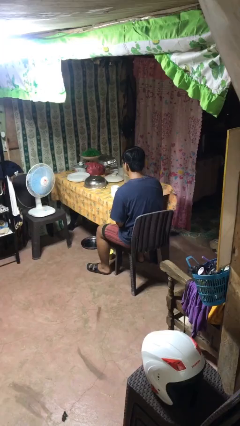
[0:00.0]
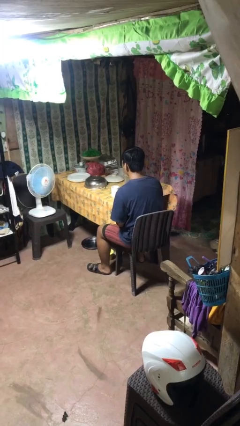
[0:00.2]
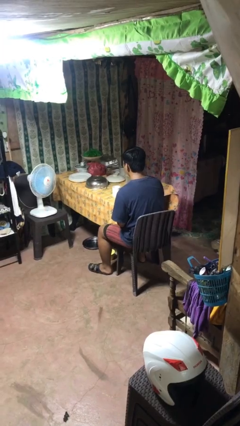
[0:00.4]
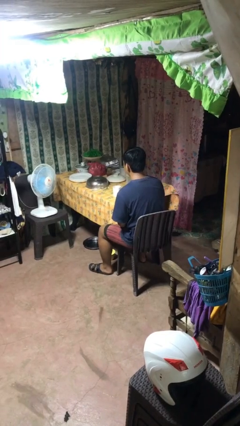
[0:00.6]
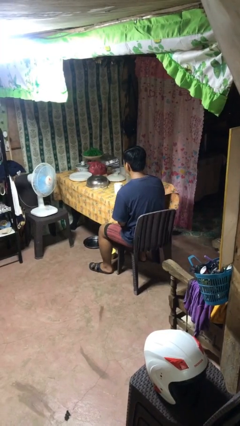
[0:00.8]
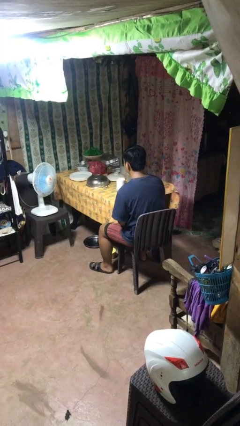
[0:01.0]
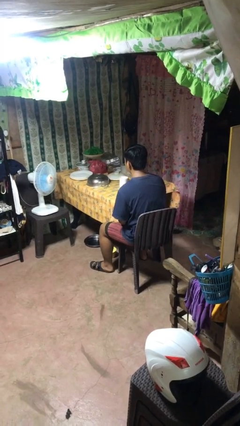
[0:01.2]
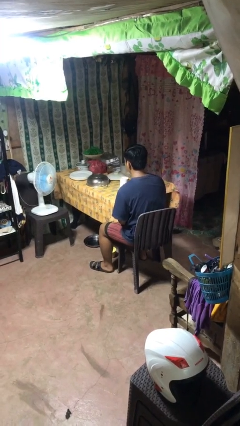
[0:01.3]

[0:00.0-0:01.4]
person picks up object from table

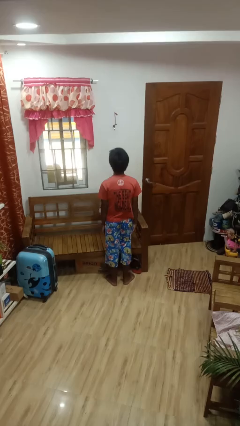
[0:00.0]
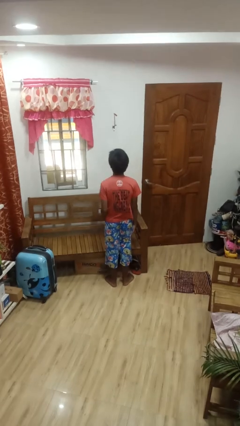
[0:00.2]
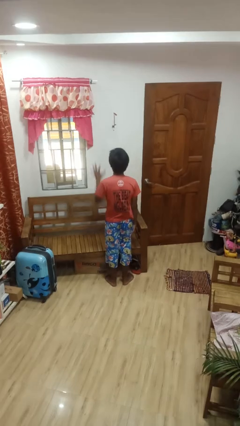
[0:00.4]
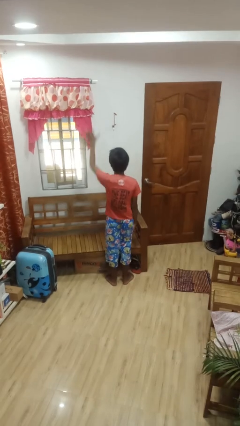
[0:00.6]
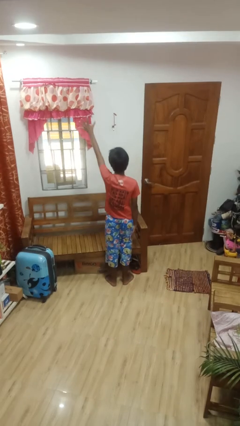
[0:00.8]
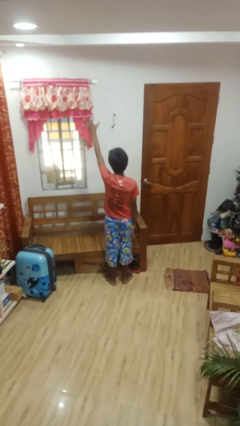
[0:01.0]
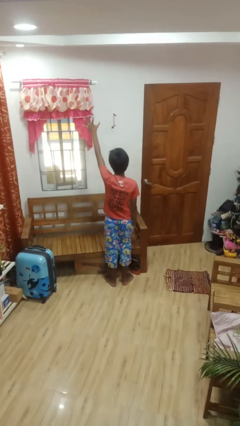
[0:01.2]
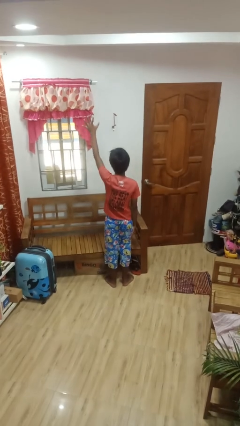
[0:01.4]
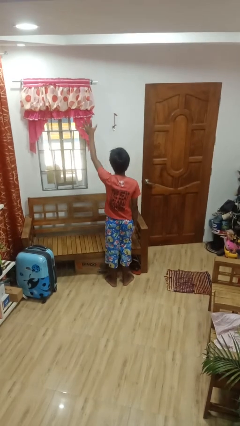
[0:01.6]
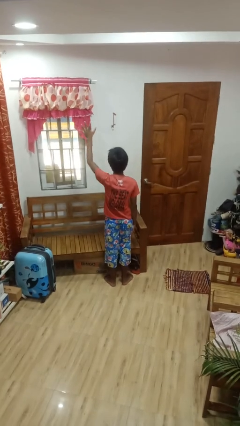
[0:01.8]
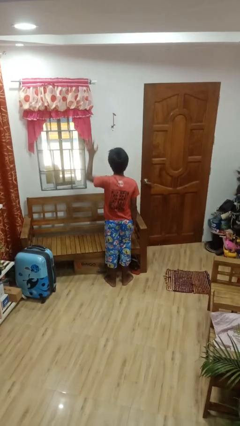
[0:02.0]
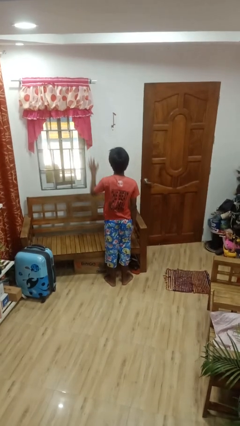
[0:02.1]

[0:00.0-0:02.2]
person gestures number five

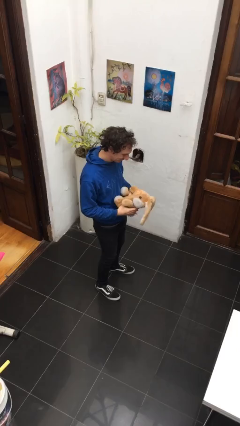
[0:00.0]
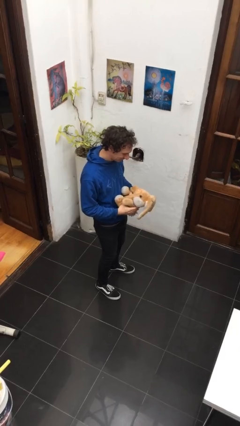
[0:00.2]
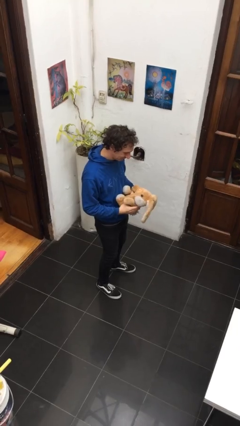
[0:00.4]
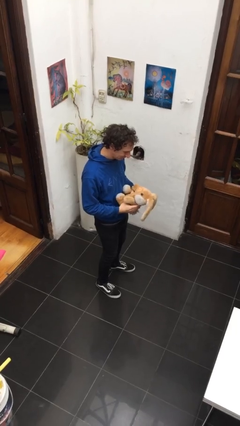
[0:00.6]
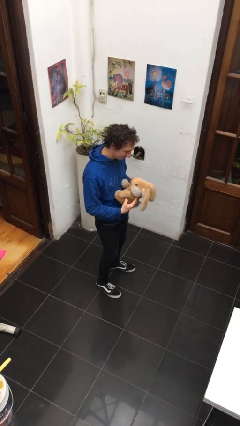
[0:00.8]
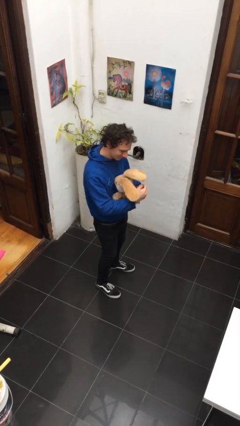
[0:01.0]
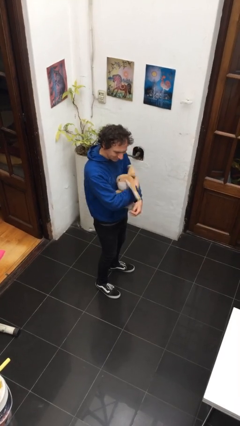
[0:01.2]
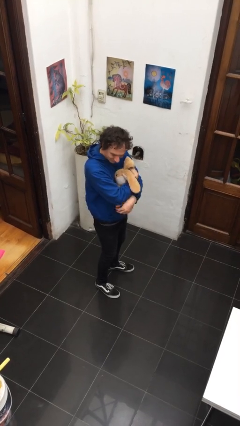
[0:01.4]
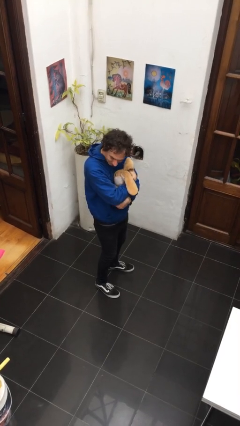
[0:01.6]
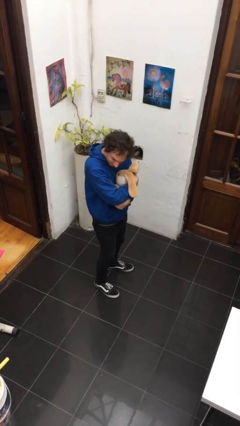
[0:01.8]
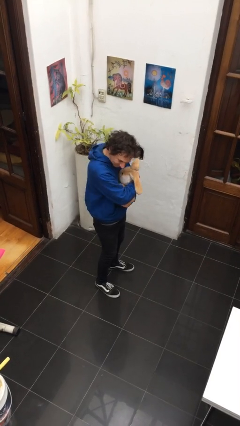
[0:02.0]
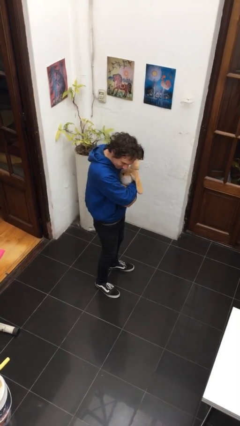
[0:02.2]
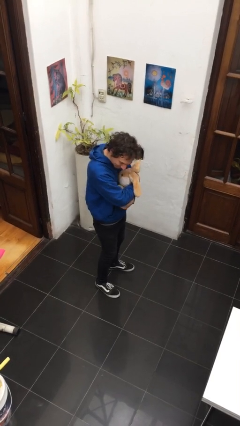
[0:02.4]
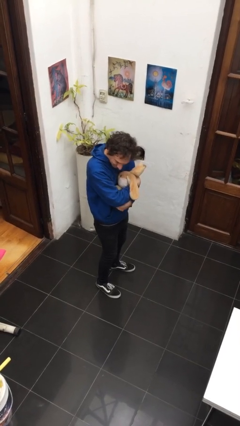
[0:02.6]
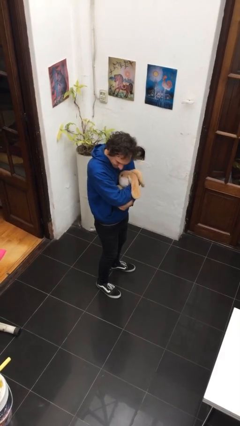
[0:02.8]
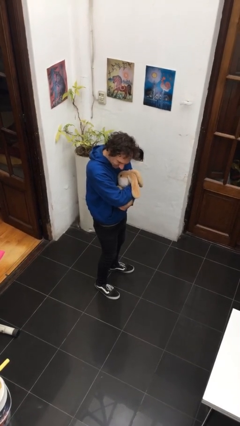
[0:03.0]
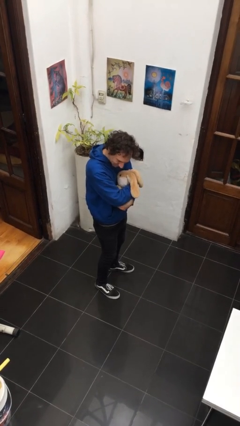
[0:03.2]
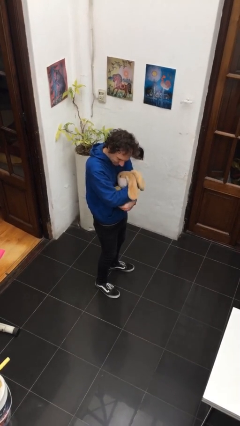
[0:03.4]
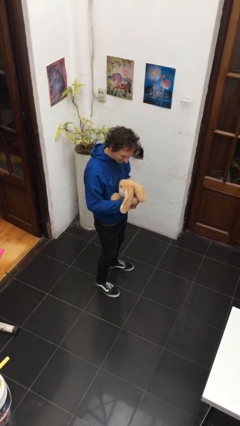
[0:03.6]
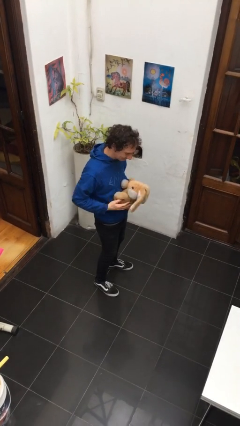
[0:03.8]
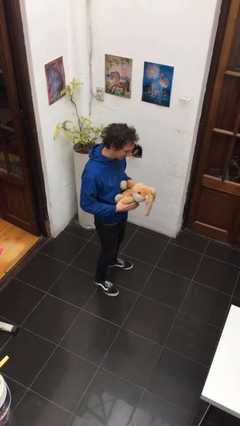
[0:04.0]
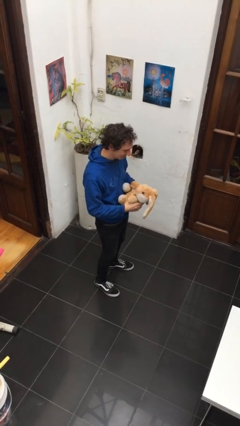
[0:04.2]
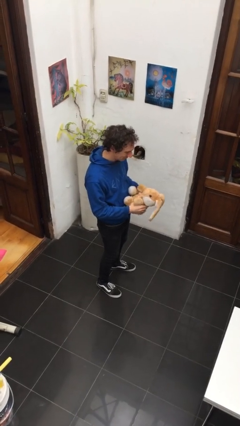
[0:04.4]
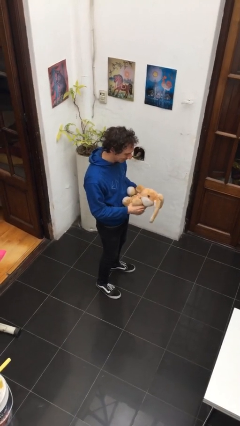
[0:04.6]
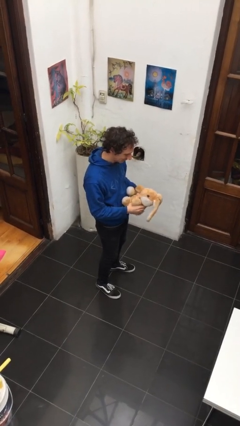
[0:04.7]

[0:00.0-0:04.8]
person hugs stuffed animal

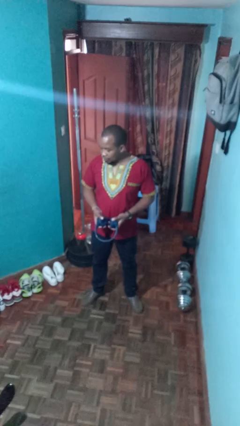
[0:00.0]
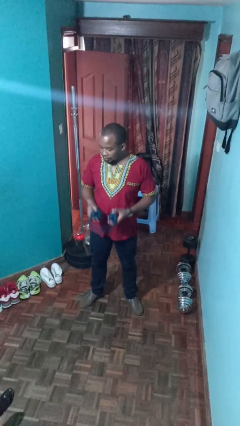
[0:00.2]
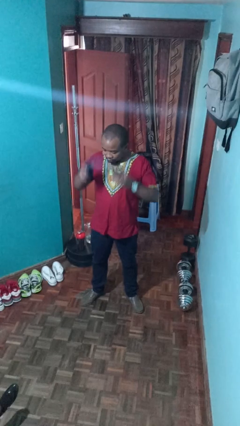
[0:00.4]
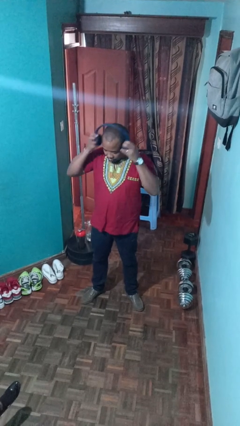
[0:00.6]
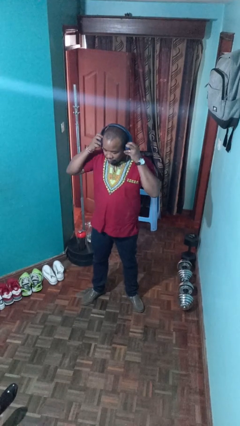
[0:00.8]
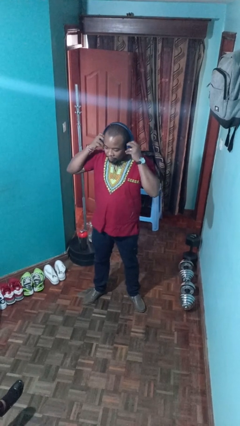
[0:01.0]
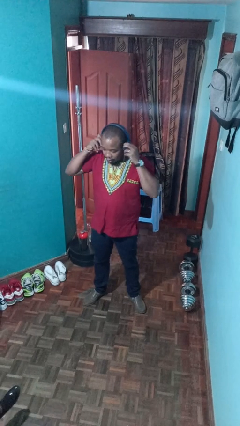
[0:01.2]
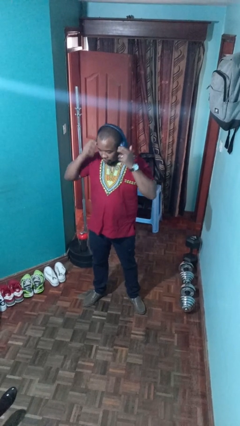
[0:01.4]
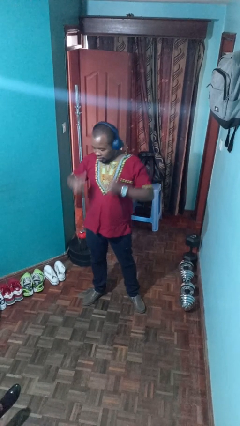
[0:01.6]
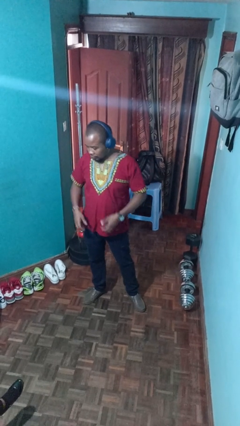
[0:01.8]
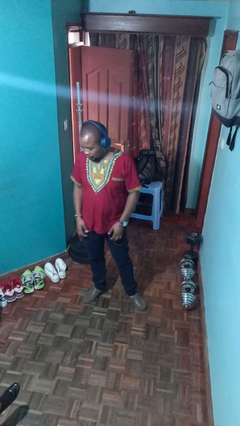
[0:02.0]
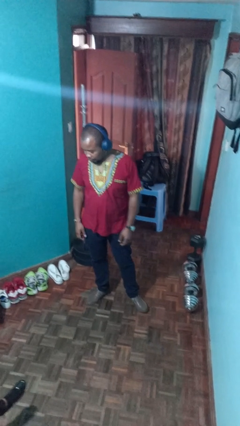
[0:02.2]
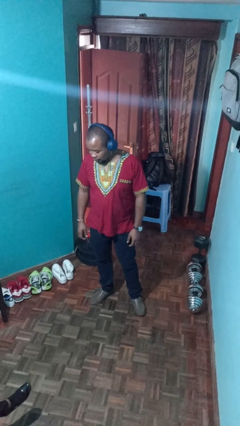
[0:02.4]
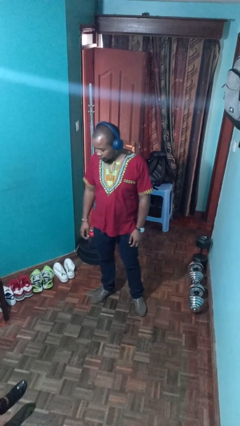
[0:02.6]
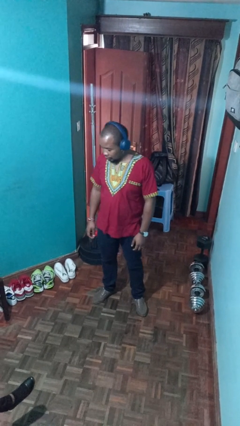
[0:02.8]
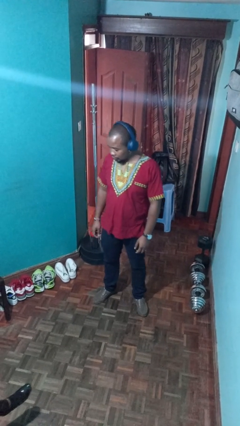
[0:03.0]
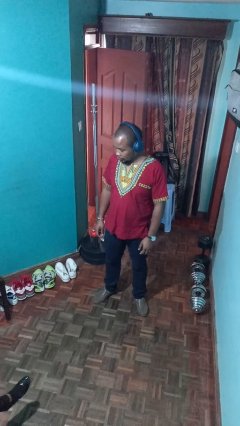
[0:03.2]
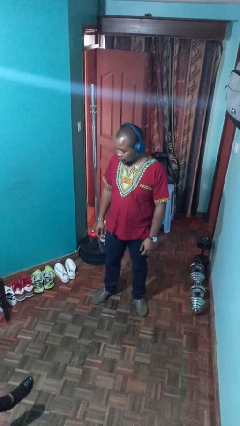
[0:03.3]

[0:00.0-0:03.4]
person puts on headphones

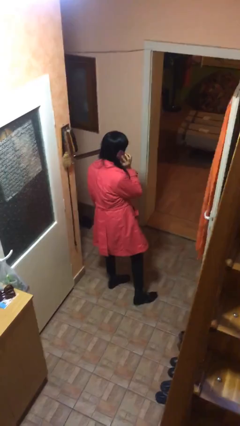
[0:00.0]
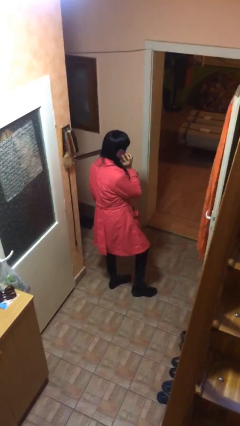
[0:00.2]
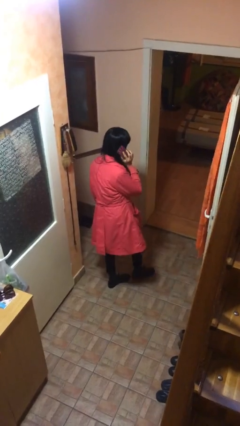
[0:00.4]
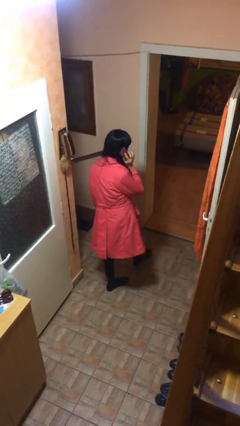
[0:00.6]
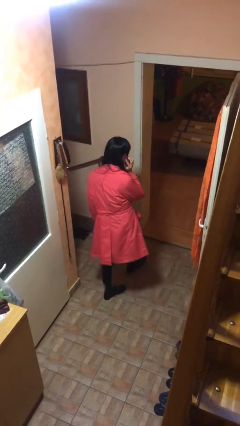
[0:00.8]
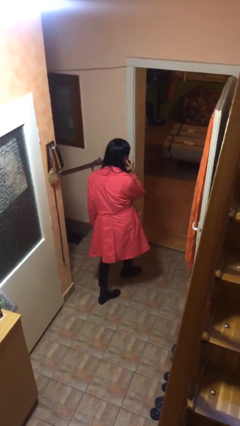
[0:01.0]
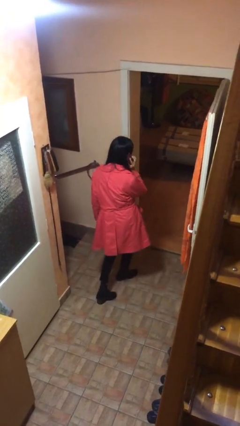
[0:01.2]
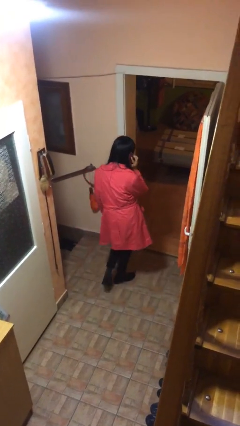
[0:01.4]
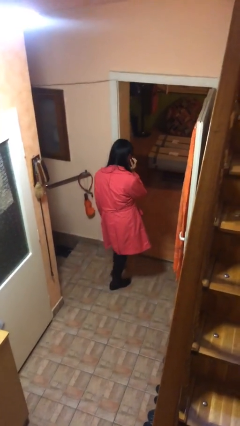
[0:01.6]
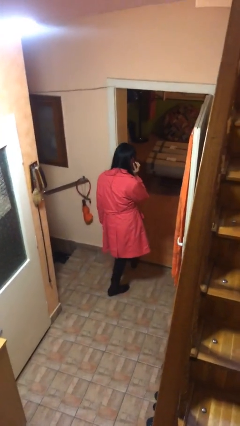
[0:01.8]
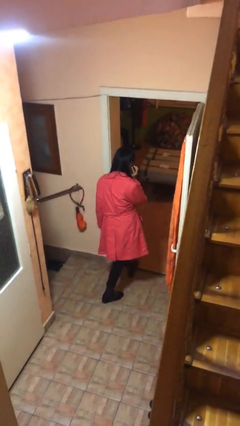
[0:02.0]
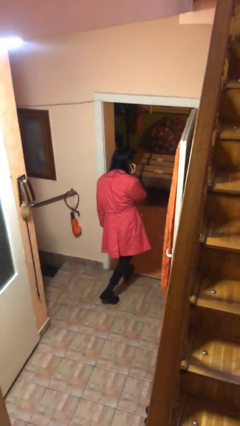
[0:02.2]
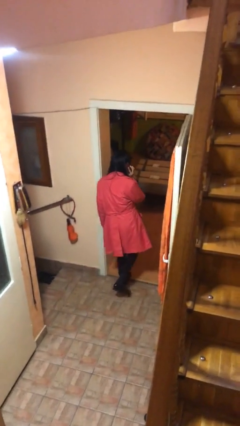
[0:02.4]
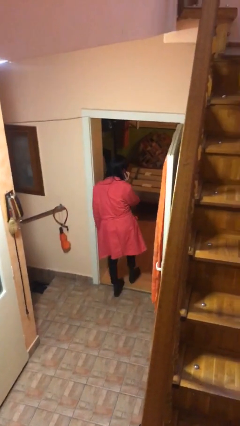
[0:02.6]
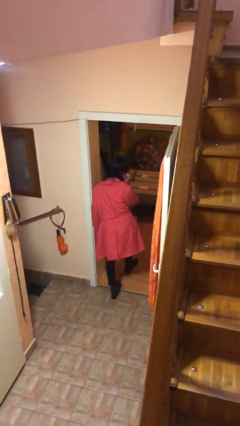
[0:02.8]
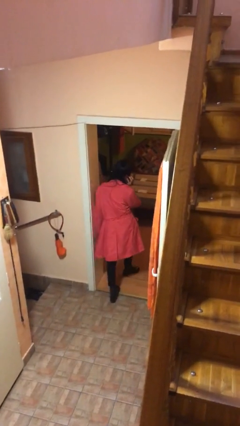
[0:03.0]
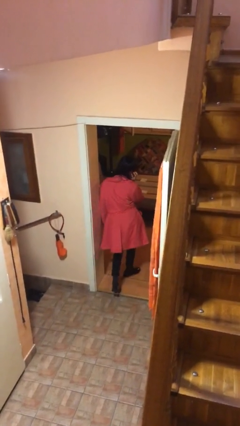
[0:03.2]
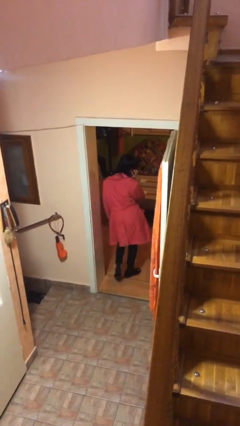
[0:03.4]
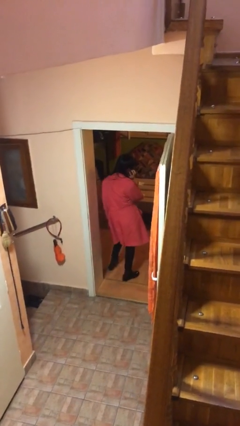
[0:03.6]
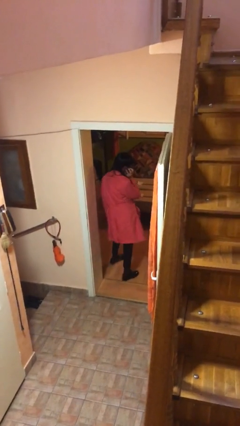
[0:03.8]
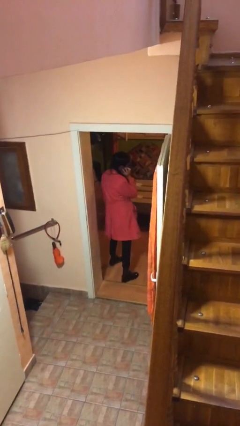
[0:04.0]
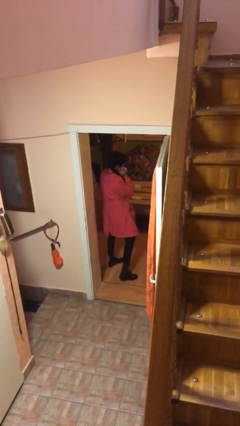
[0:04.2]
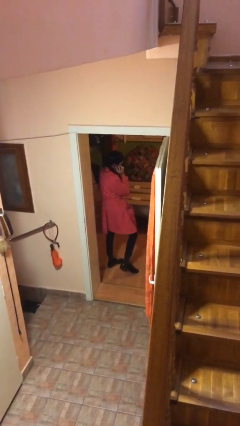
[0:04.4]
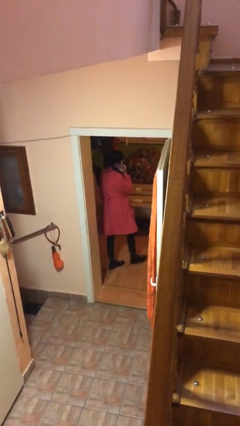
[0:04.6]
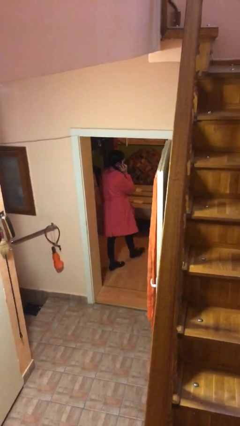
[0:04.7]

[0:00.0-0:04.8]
person exits scene through structure

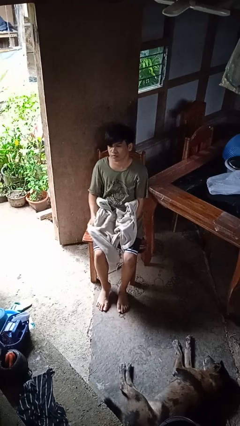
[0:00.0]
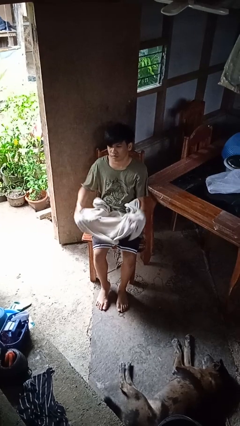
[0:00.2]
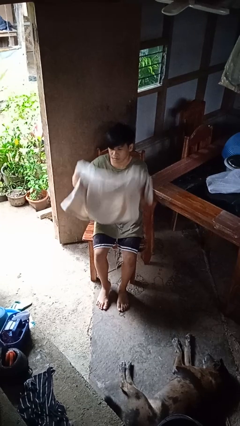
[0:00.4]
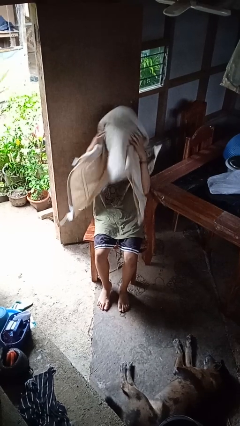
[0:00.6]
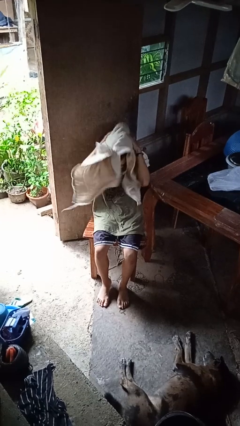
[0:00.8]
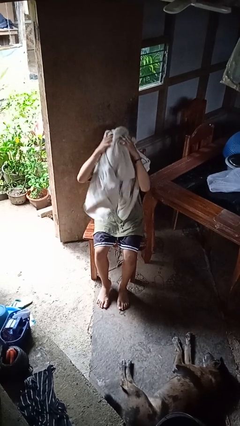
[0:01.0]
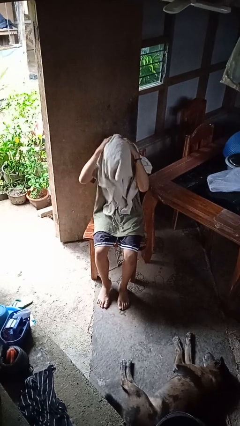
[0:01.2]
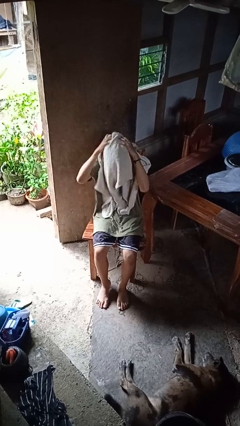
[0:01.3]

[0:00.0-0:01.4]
person dries hair with towel
